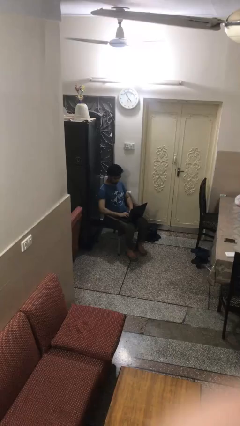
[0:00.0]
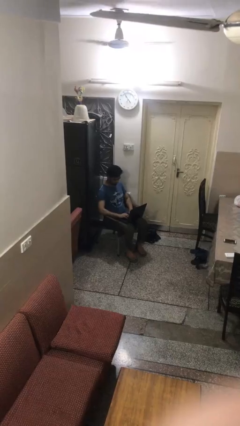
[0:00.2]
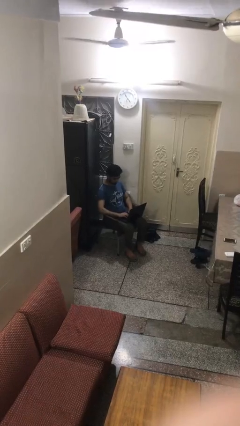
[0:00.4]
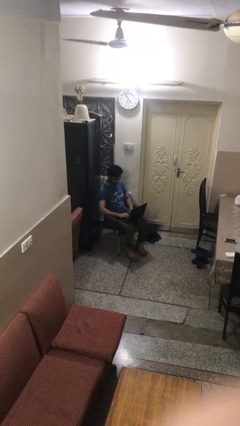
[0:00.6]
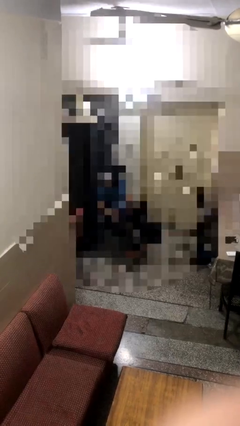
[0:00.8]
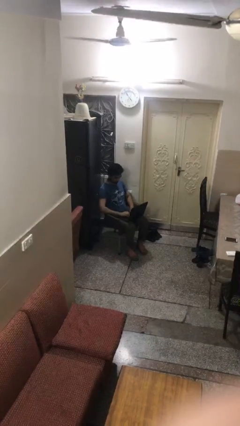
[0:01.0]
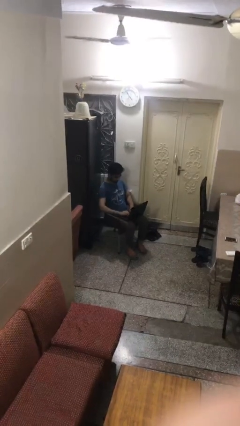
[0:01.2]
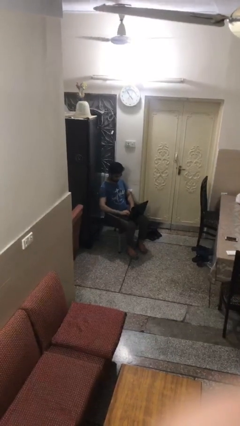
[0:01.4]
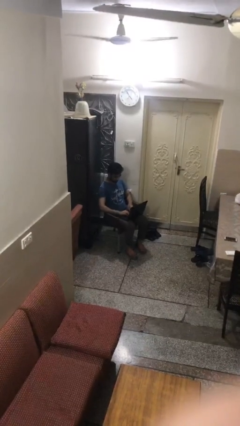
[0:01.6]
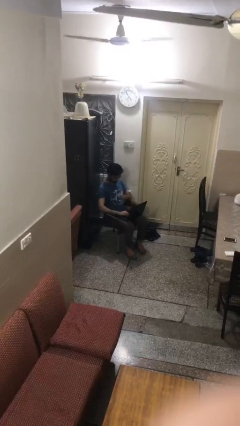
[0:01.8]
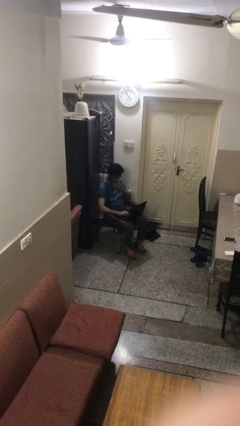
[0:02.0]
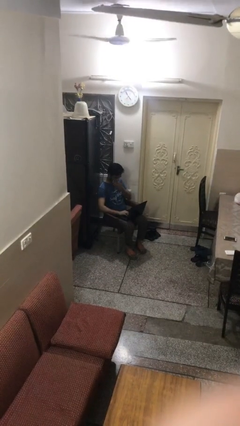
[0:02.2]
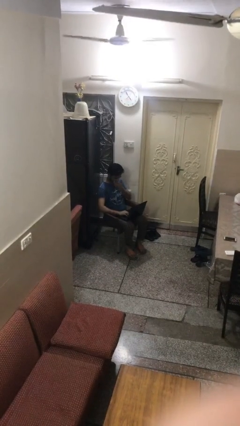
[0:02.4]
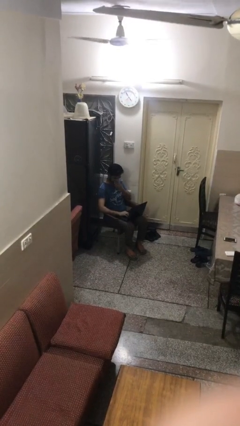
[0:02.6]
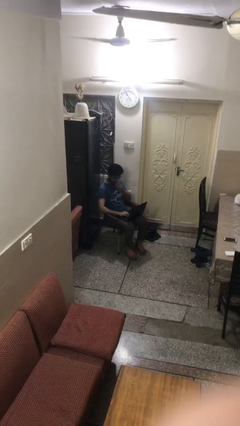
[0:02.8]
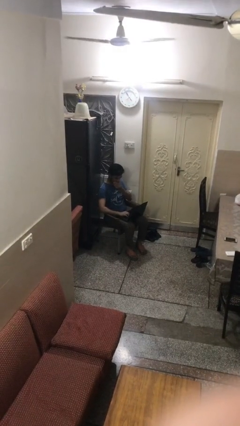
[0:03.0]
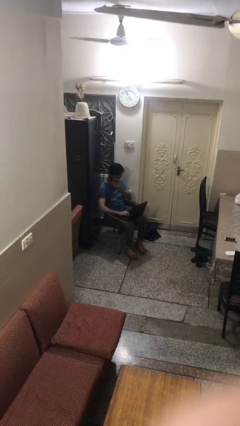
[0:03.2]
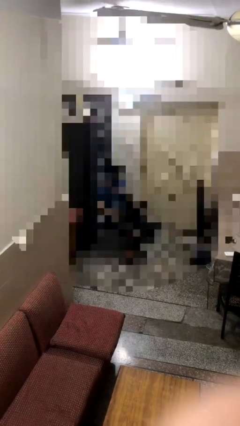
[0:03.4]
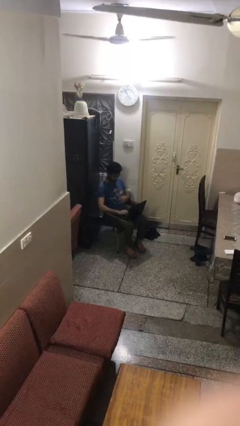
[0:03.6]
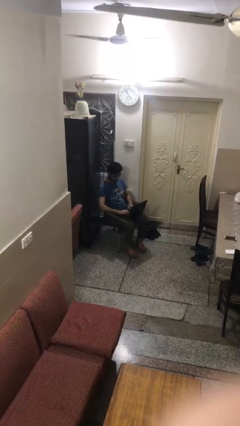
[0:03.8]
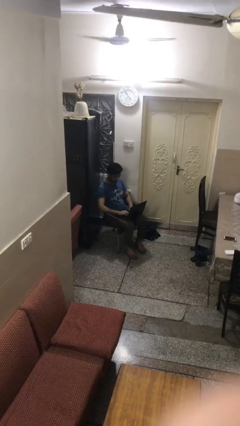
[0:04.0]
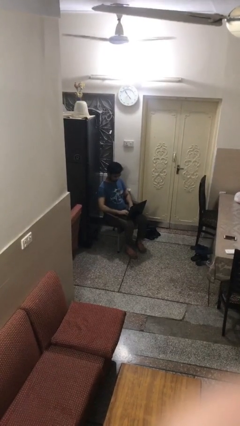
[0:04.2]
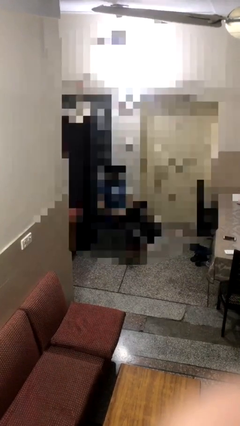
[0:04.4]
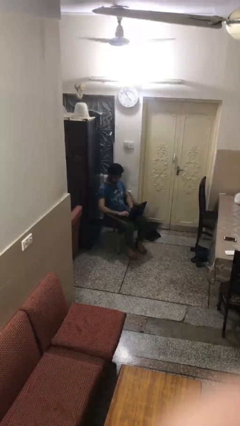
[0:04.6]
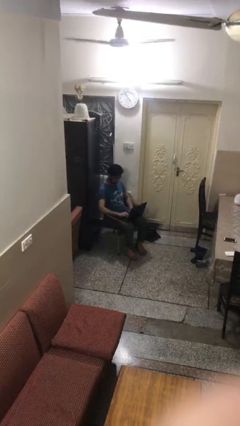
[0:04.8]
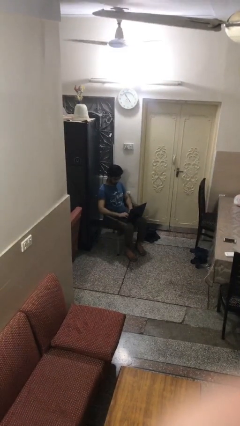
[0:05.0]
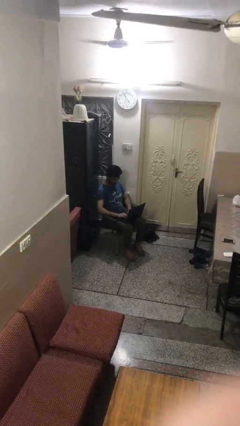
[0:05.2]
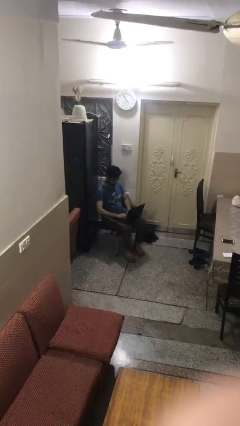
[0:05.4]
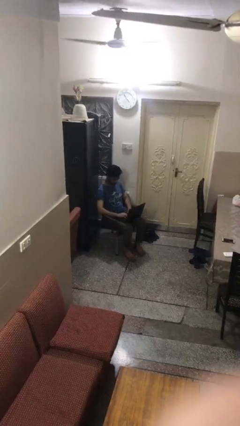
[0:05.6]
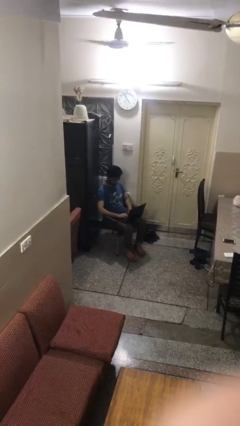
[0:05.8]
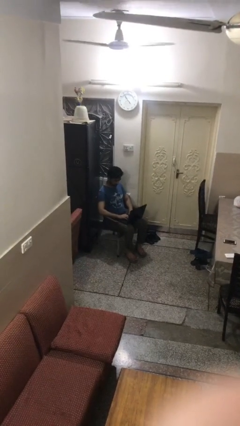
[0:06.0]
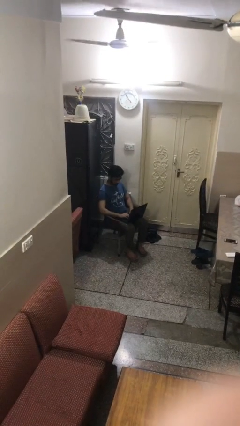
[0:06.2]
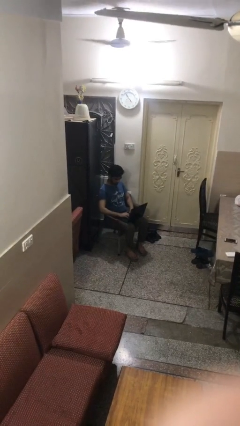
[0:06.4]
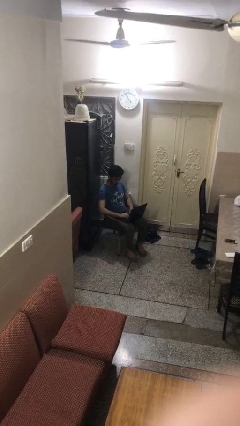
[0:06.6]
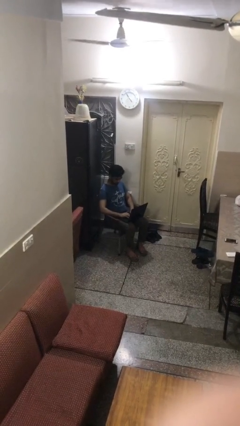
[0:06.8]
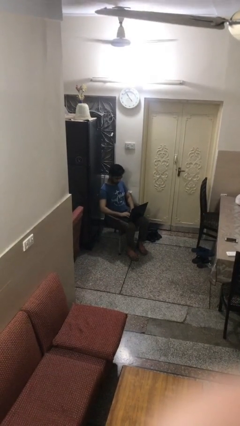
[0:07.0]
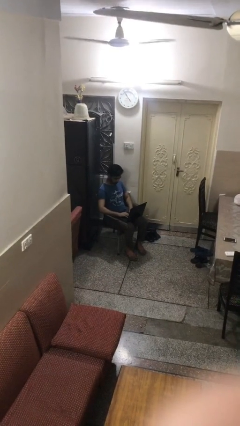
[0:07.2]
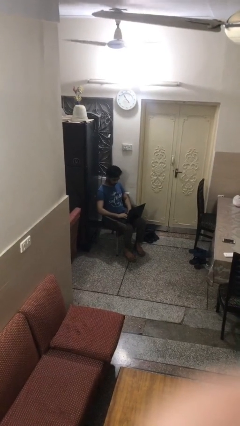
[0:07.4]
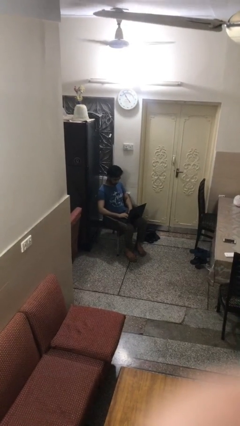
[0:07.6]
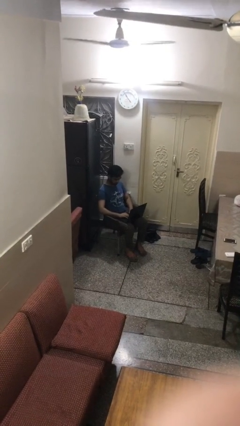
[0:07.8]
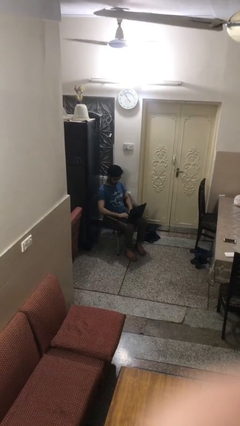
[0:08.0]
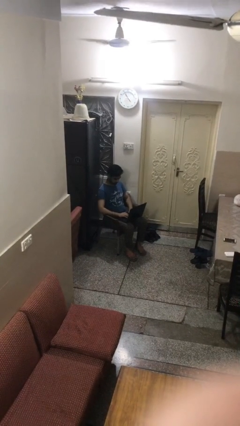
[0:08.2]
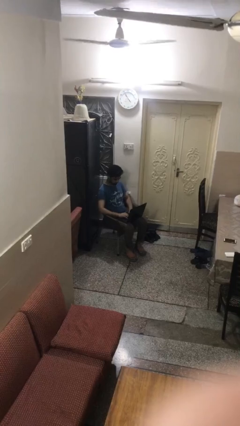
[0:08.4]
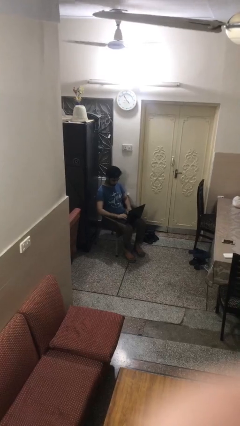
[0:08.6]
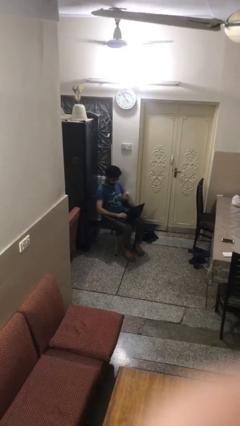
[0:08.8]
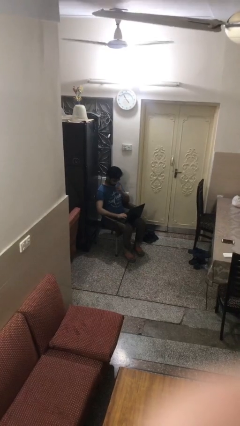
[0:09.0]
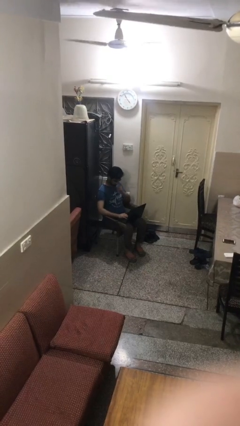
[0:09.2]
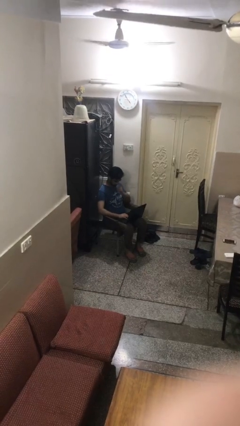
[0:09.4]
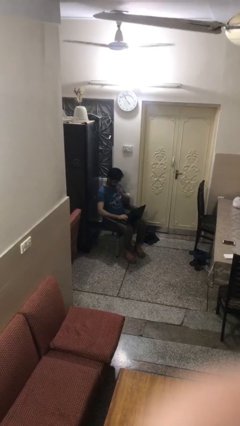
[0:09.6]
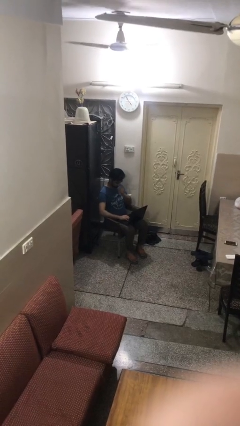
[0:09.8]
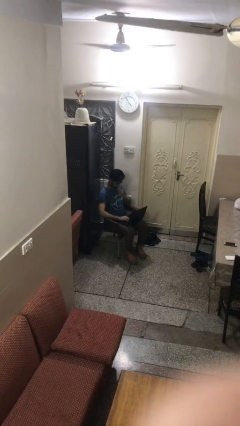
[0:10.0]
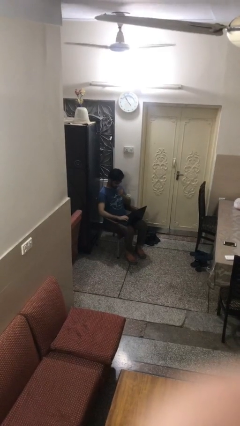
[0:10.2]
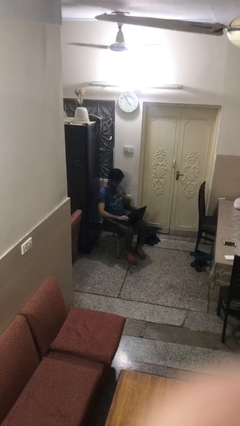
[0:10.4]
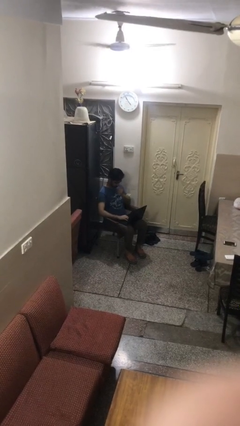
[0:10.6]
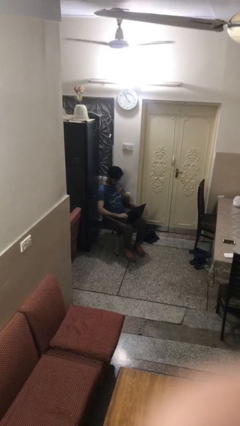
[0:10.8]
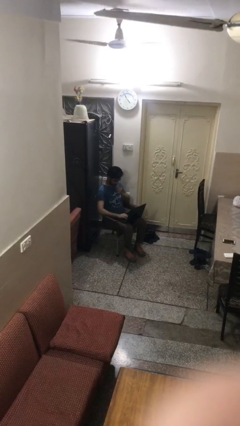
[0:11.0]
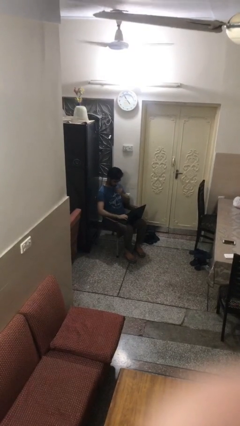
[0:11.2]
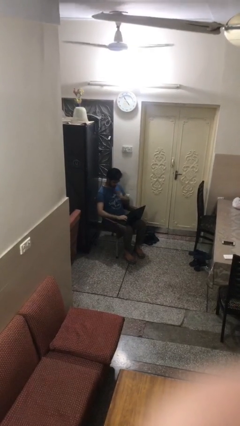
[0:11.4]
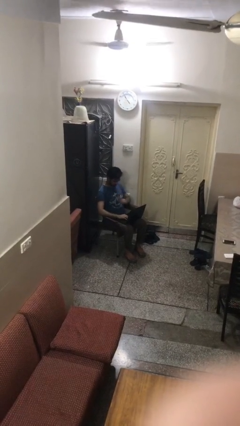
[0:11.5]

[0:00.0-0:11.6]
person interacts with laptop

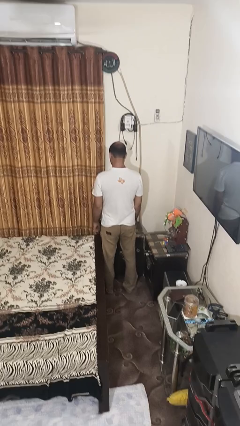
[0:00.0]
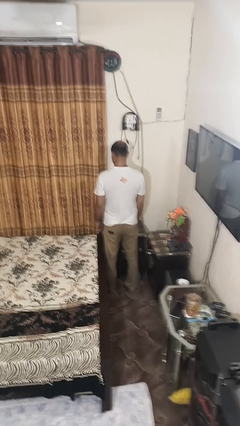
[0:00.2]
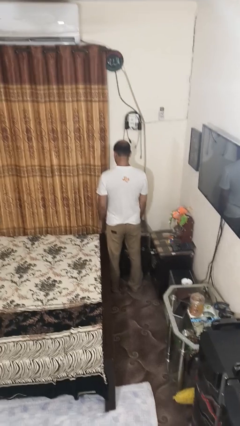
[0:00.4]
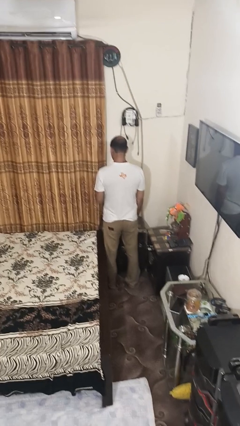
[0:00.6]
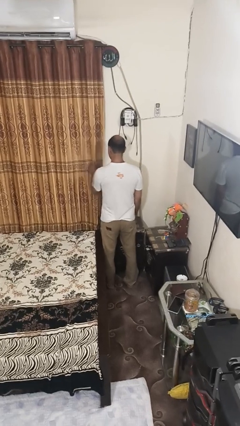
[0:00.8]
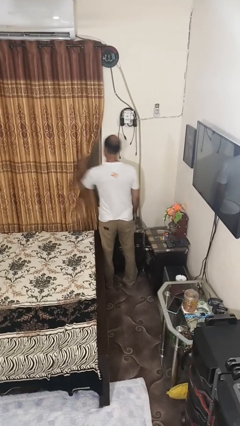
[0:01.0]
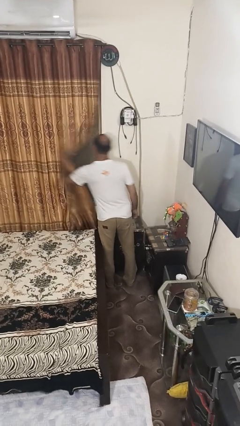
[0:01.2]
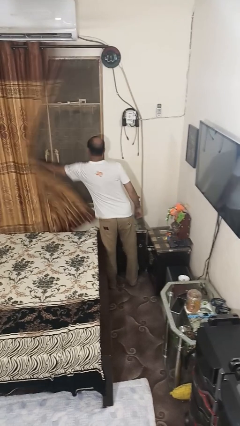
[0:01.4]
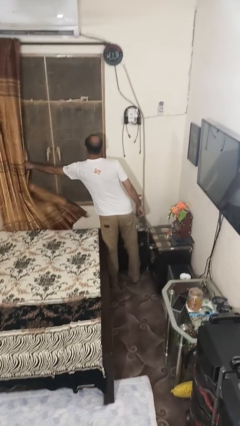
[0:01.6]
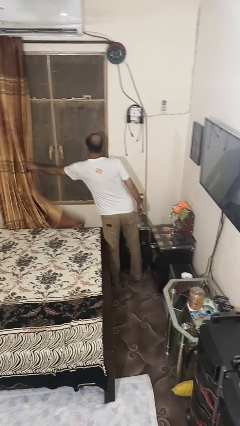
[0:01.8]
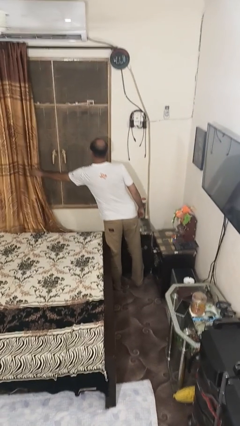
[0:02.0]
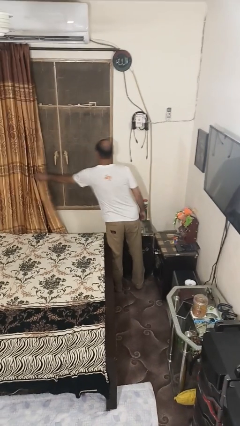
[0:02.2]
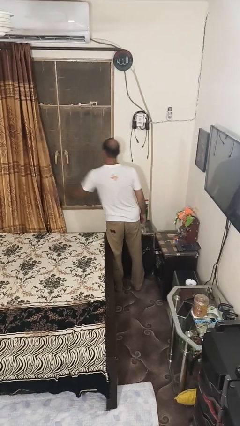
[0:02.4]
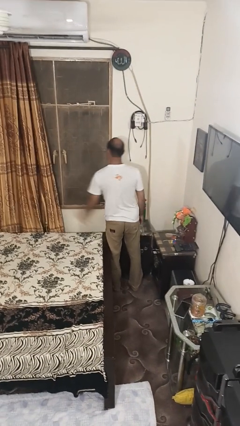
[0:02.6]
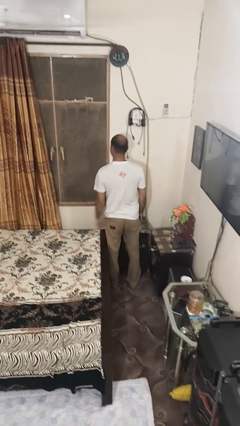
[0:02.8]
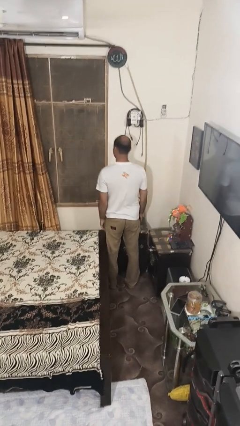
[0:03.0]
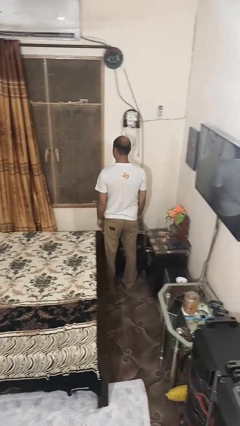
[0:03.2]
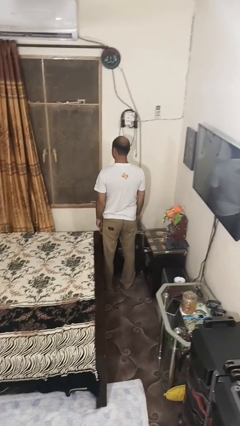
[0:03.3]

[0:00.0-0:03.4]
person opens curtains

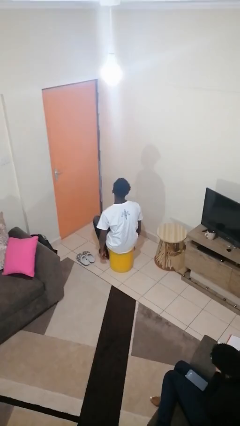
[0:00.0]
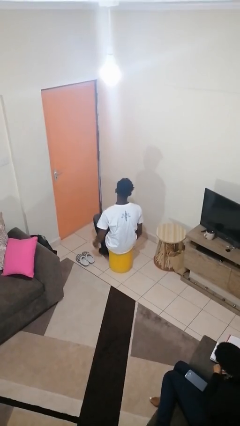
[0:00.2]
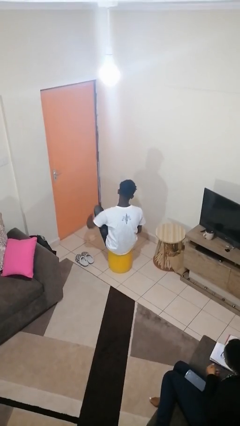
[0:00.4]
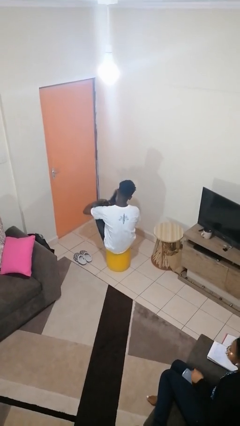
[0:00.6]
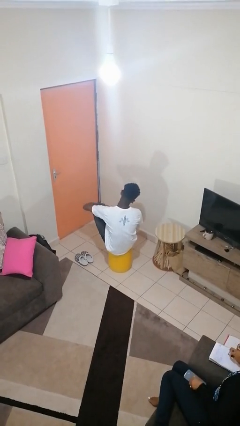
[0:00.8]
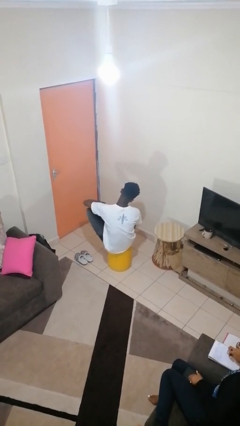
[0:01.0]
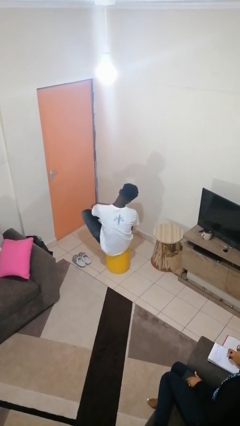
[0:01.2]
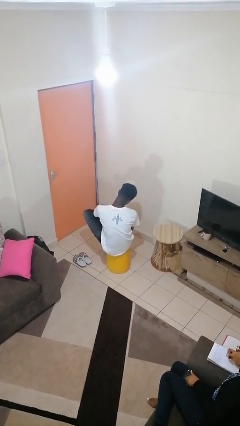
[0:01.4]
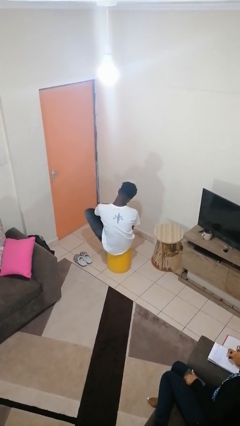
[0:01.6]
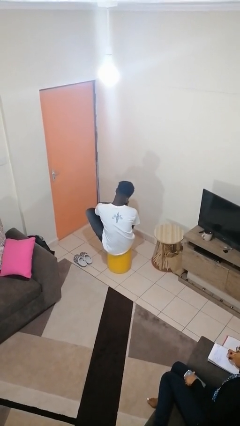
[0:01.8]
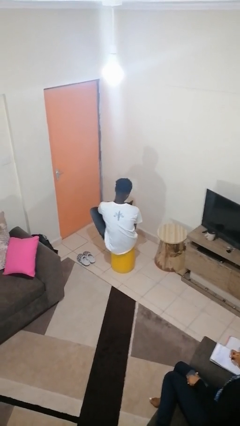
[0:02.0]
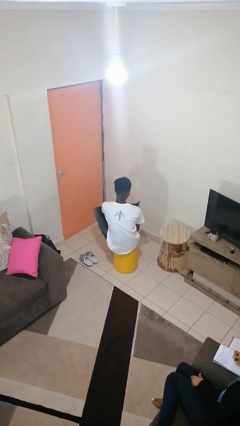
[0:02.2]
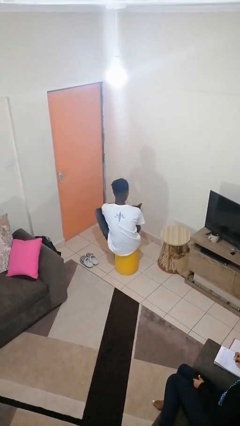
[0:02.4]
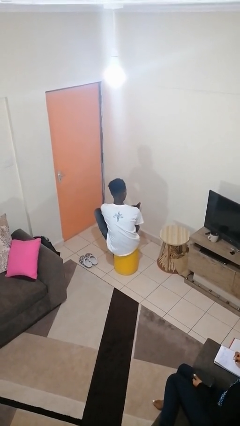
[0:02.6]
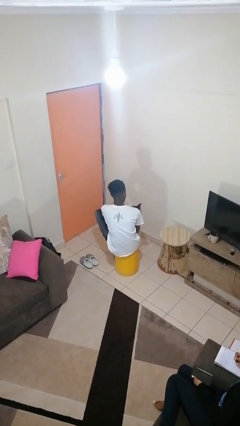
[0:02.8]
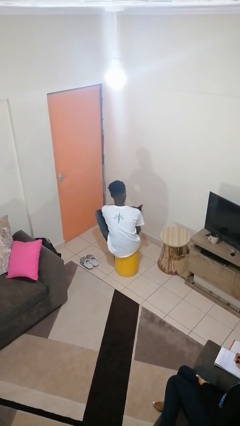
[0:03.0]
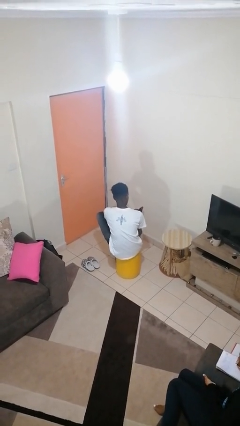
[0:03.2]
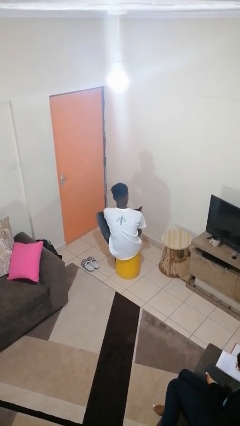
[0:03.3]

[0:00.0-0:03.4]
person rubs foot
